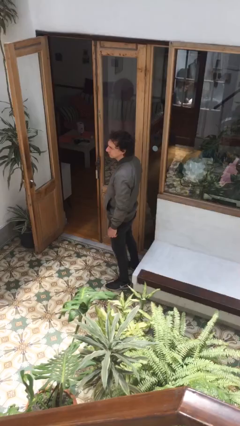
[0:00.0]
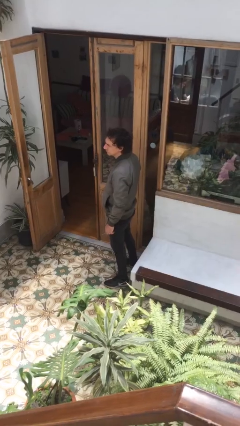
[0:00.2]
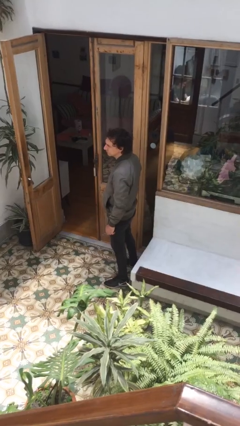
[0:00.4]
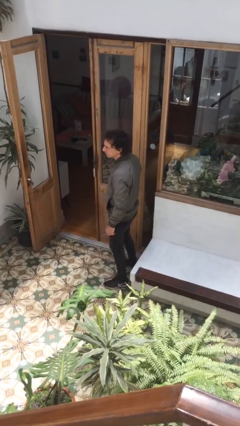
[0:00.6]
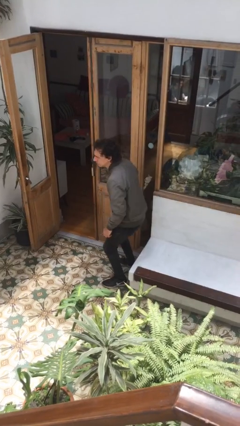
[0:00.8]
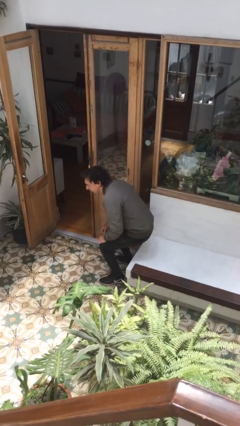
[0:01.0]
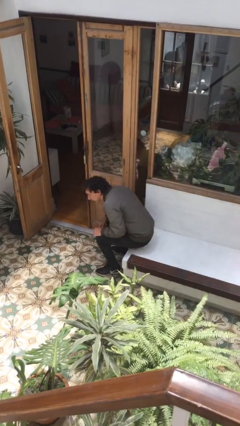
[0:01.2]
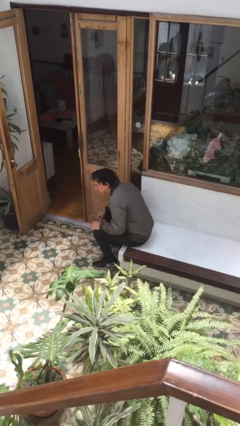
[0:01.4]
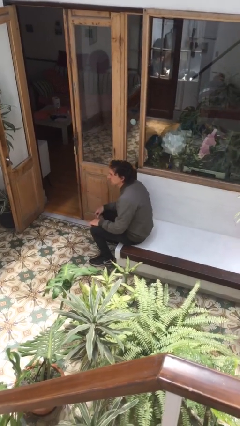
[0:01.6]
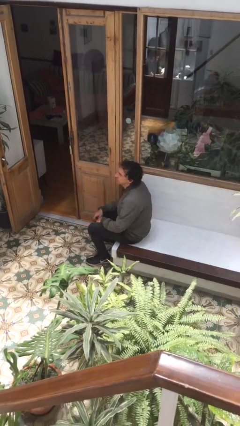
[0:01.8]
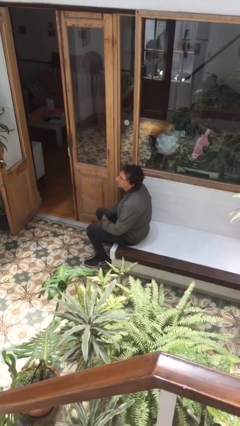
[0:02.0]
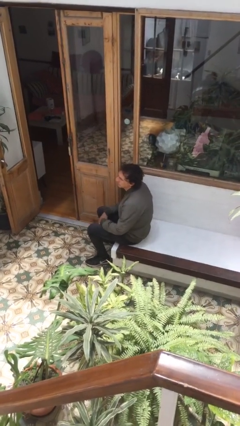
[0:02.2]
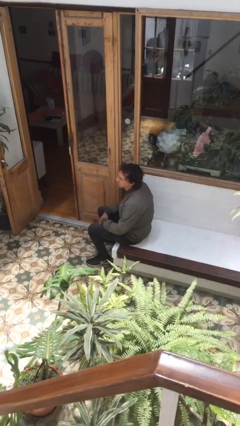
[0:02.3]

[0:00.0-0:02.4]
person sits down

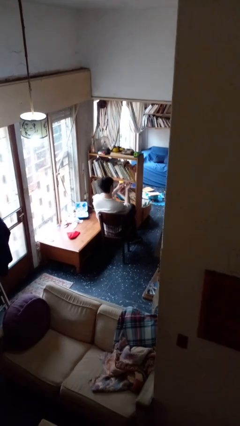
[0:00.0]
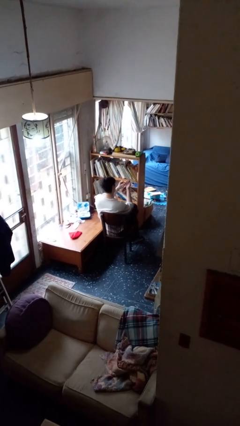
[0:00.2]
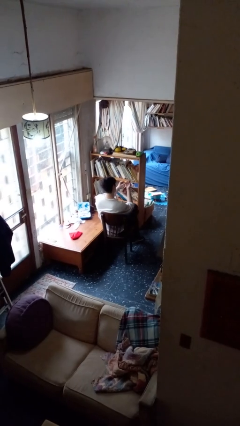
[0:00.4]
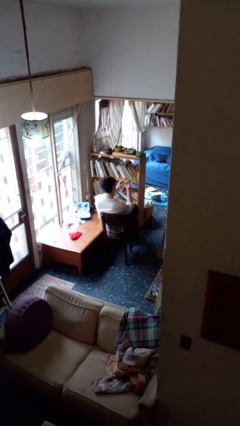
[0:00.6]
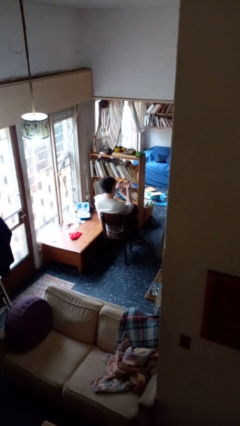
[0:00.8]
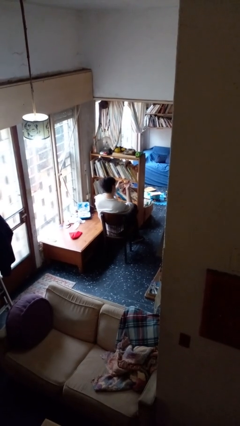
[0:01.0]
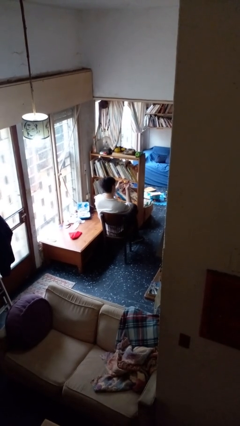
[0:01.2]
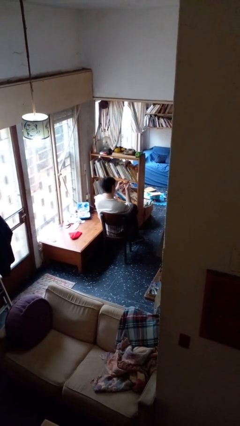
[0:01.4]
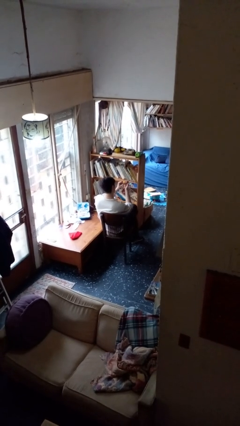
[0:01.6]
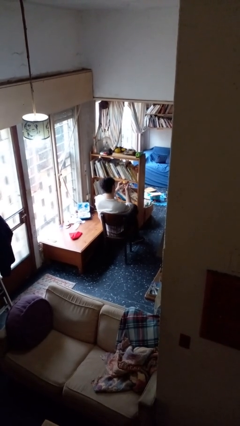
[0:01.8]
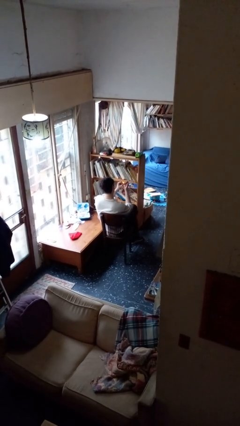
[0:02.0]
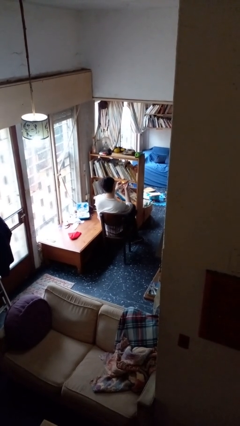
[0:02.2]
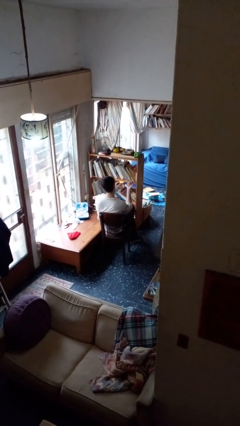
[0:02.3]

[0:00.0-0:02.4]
person files fingernails

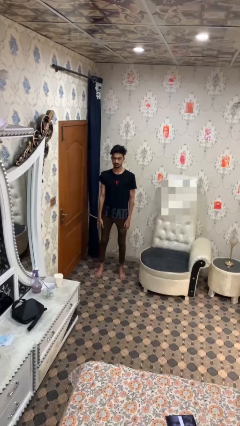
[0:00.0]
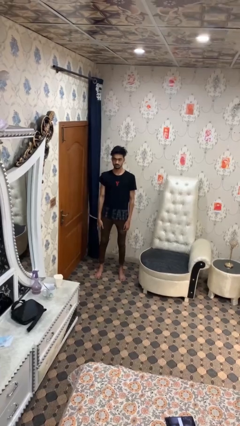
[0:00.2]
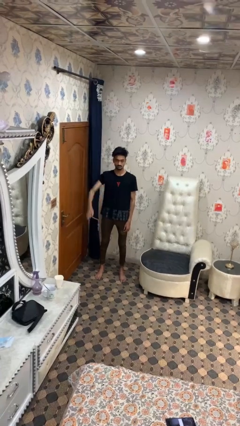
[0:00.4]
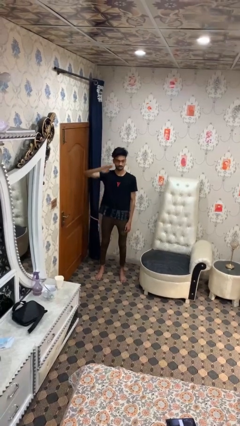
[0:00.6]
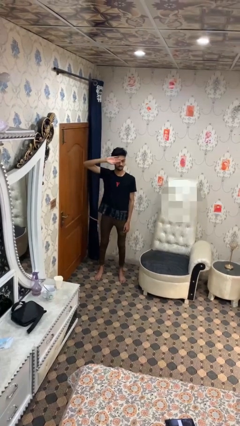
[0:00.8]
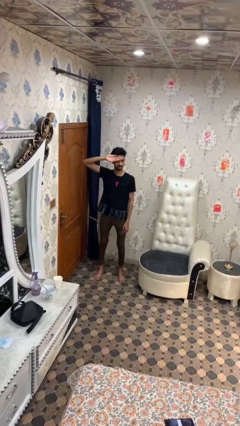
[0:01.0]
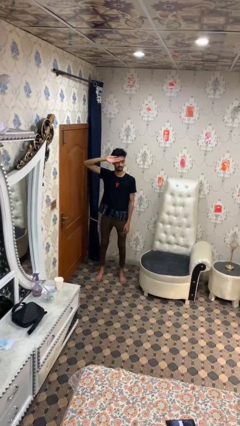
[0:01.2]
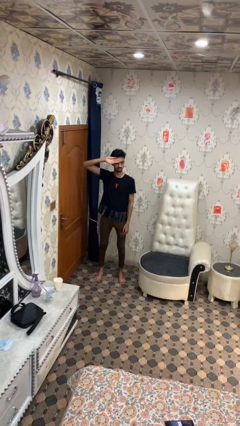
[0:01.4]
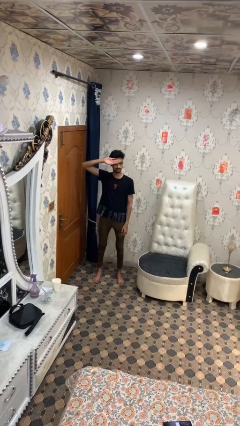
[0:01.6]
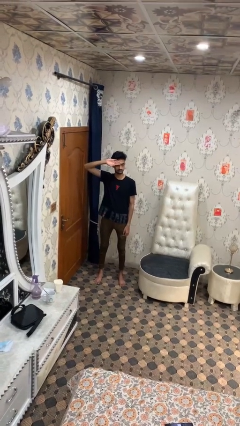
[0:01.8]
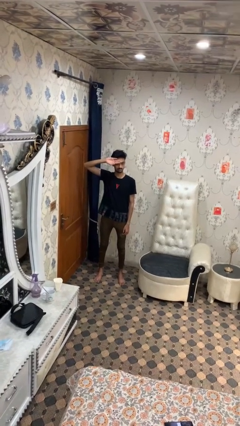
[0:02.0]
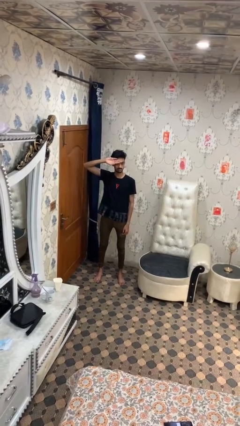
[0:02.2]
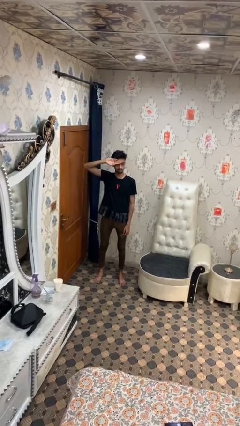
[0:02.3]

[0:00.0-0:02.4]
person salutes

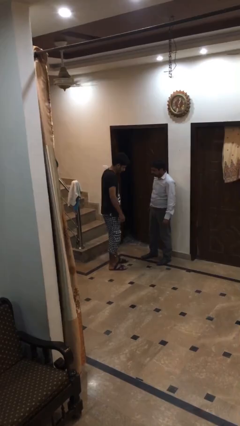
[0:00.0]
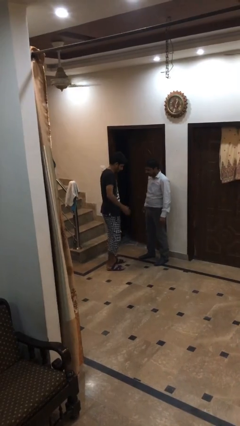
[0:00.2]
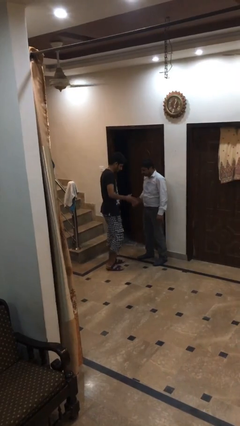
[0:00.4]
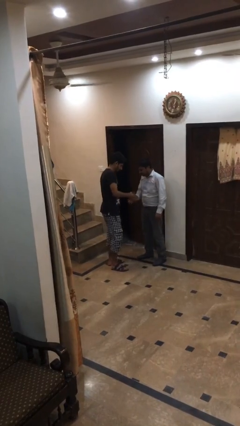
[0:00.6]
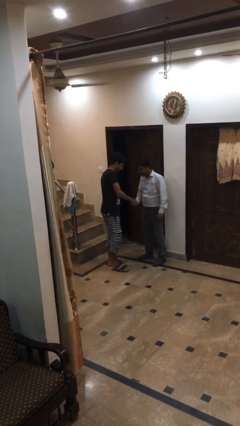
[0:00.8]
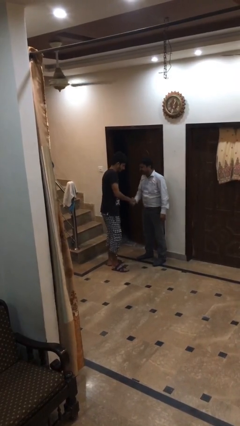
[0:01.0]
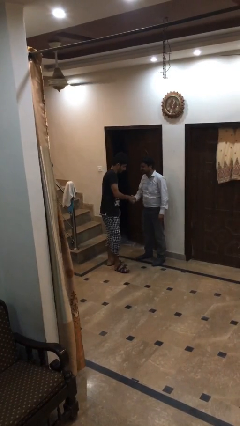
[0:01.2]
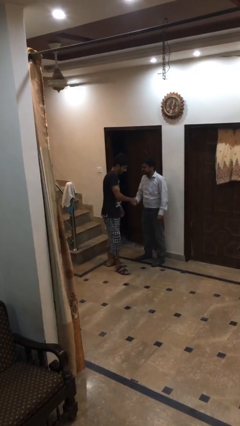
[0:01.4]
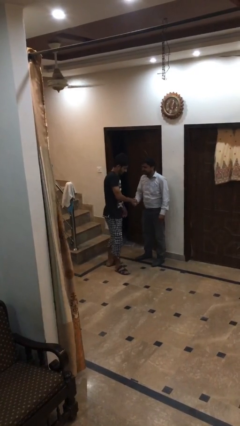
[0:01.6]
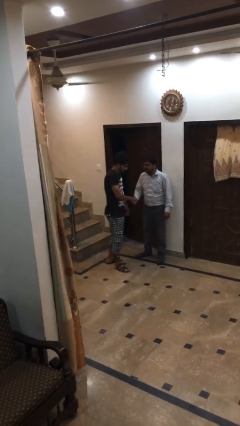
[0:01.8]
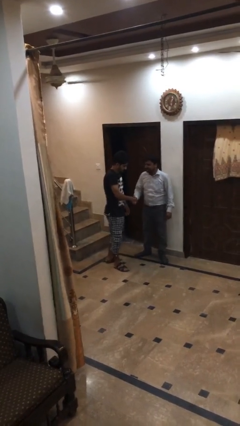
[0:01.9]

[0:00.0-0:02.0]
person shakes hand

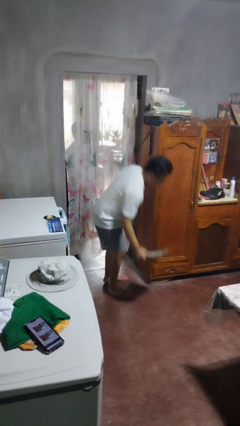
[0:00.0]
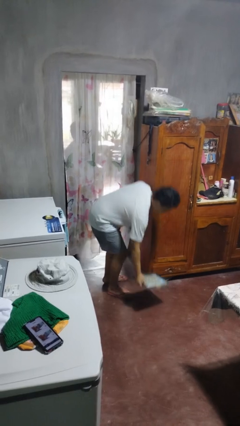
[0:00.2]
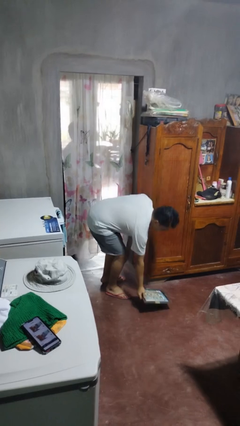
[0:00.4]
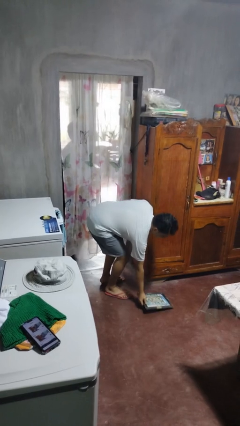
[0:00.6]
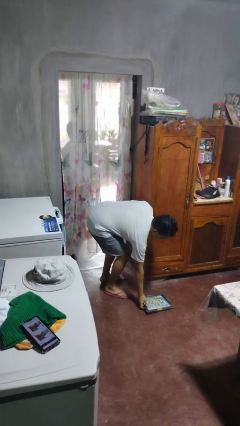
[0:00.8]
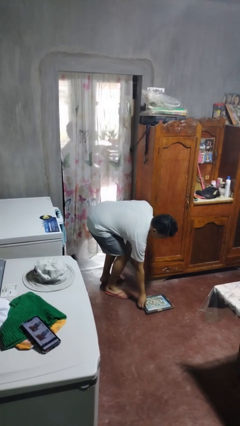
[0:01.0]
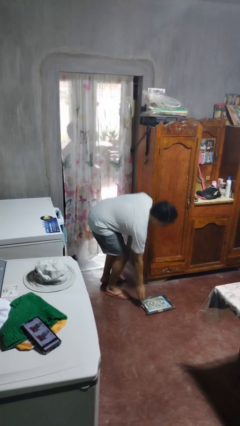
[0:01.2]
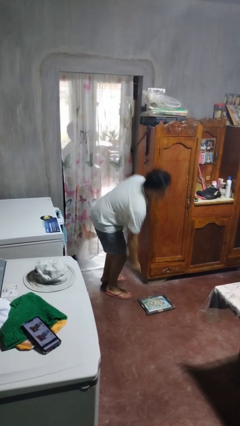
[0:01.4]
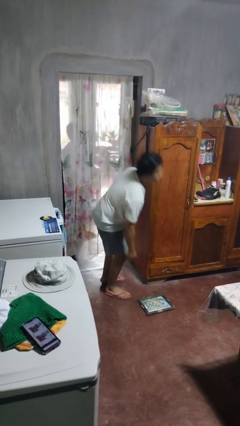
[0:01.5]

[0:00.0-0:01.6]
person puts down object on shelf

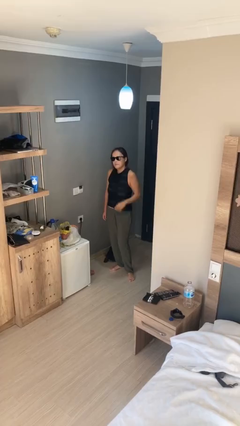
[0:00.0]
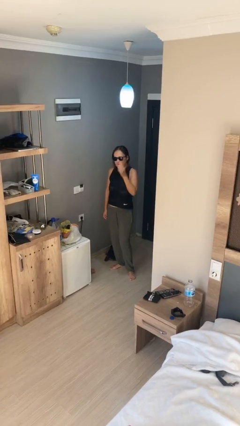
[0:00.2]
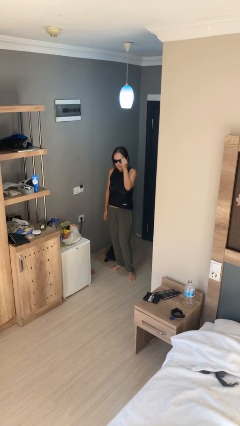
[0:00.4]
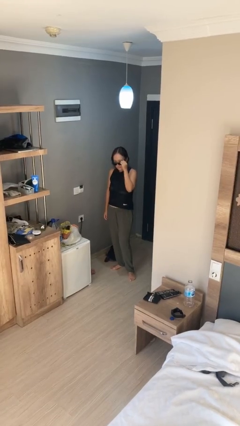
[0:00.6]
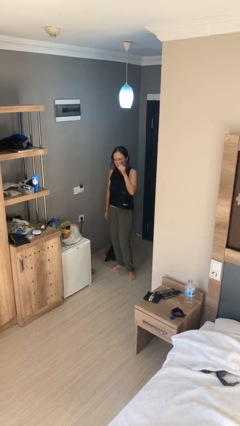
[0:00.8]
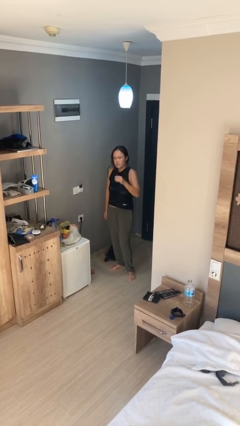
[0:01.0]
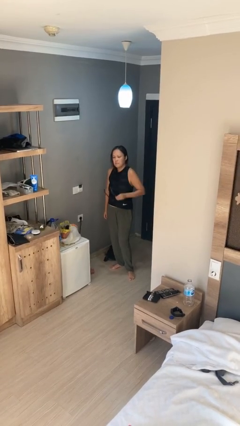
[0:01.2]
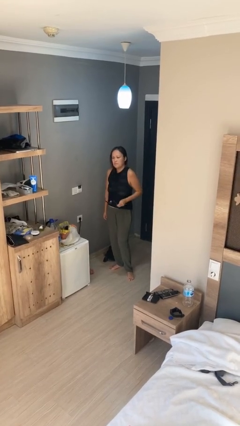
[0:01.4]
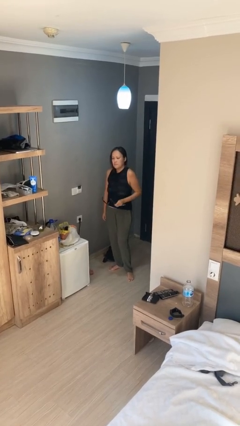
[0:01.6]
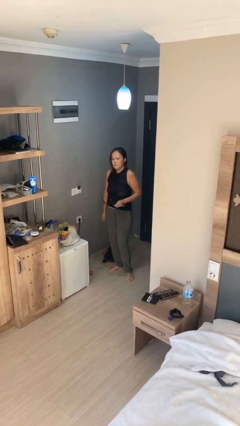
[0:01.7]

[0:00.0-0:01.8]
person takes off sunglasses

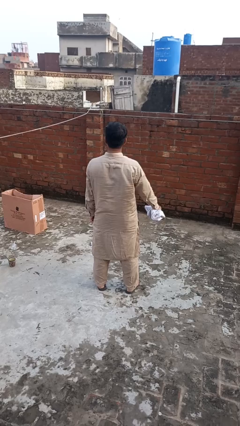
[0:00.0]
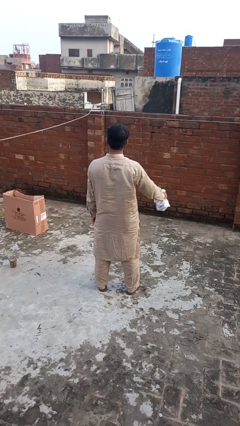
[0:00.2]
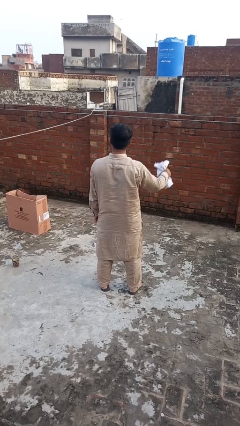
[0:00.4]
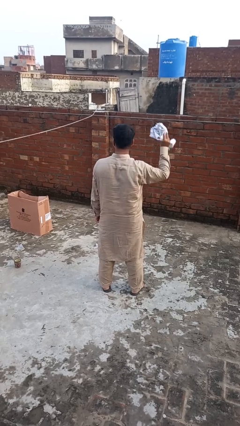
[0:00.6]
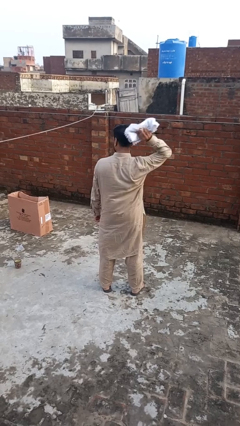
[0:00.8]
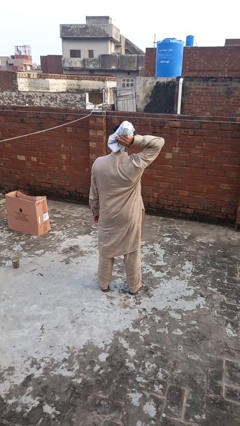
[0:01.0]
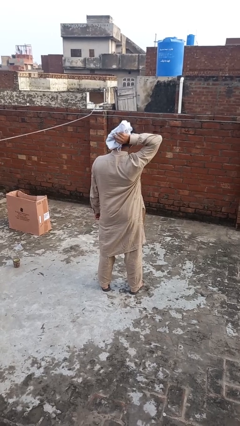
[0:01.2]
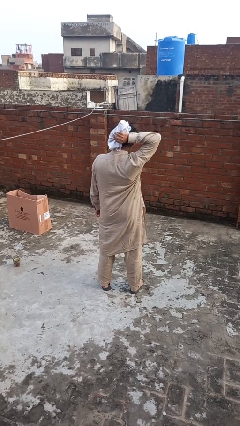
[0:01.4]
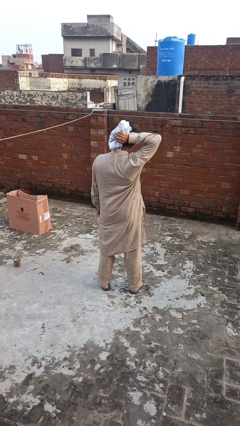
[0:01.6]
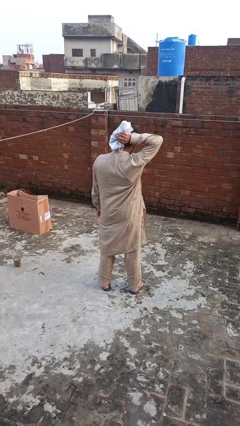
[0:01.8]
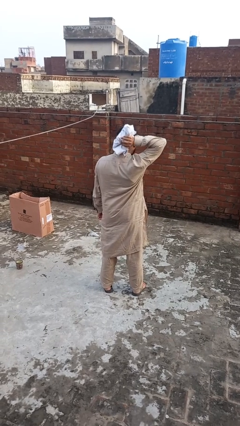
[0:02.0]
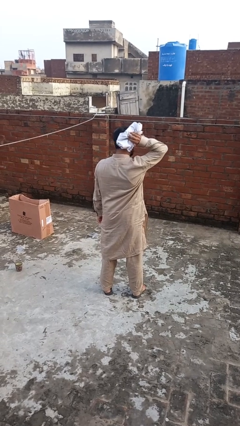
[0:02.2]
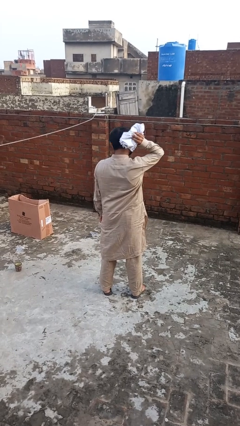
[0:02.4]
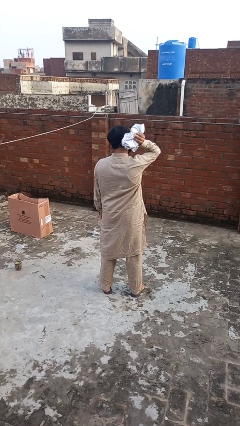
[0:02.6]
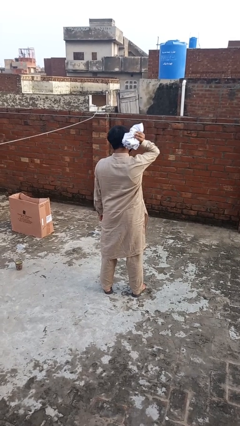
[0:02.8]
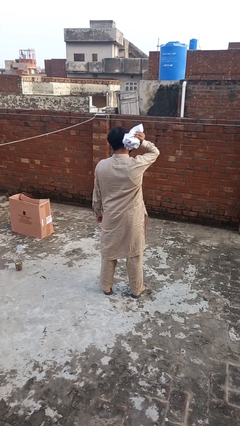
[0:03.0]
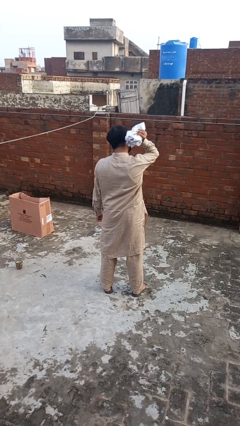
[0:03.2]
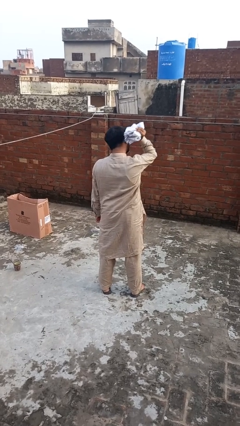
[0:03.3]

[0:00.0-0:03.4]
person dries hair with towel

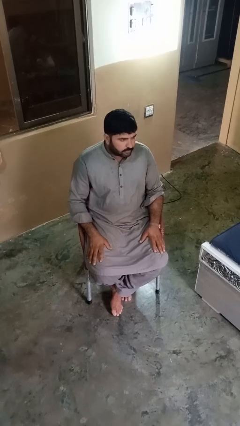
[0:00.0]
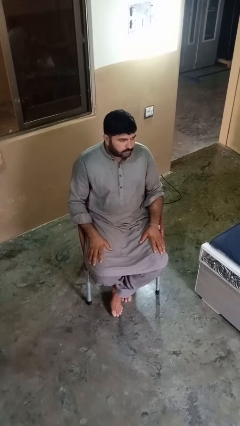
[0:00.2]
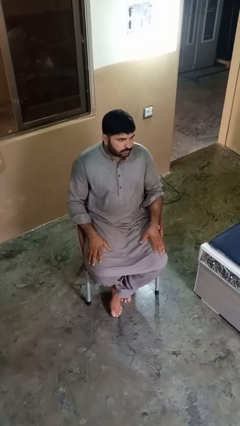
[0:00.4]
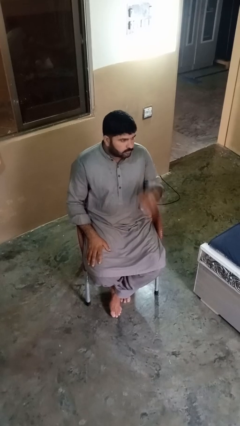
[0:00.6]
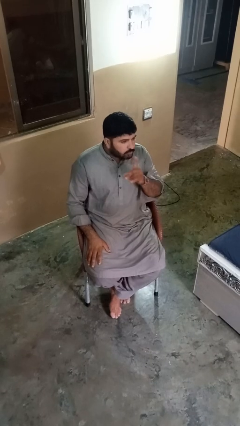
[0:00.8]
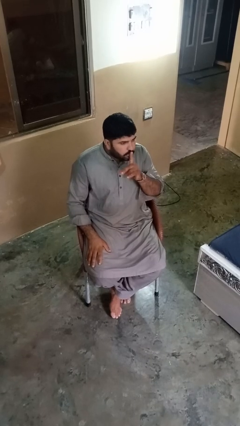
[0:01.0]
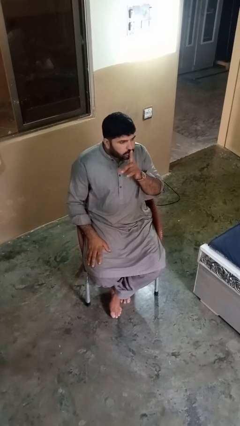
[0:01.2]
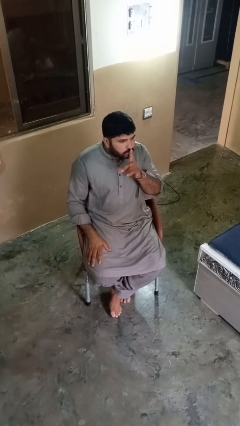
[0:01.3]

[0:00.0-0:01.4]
person gestures be quiet
